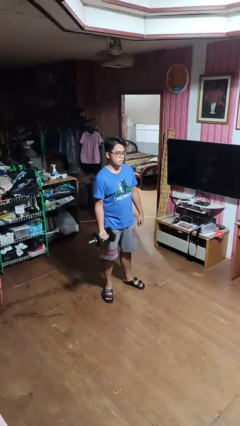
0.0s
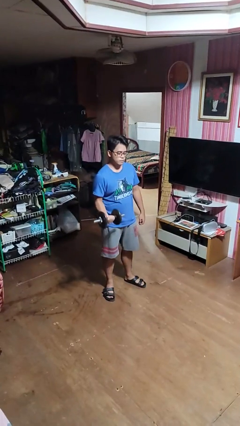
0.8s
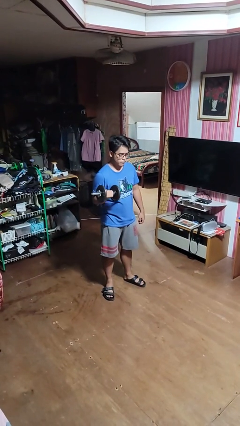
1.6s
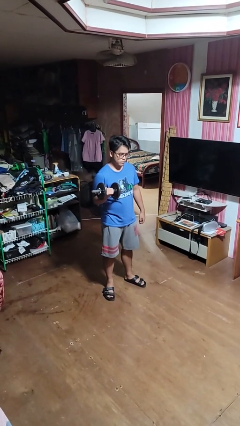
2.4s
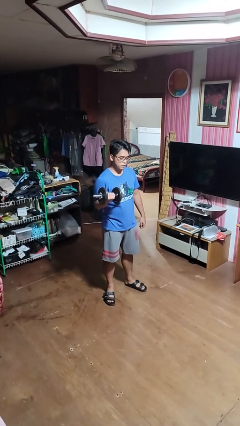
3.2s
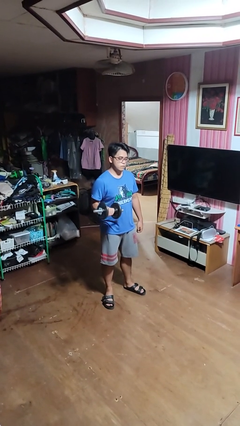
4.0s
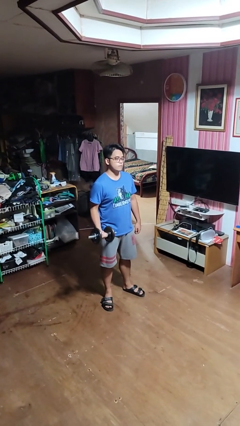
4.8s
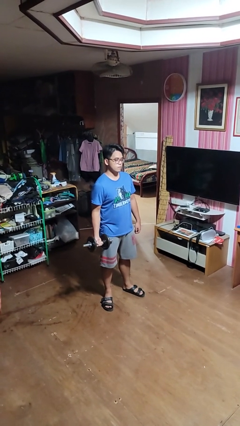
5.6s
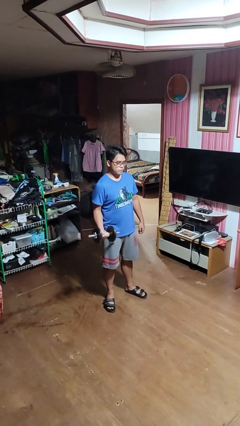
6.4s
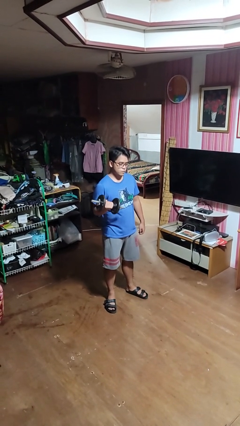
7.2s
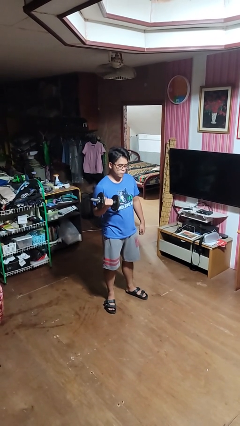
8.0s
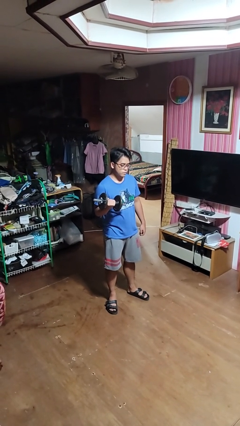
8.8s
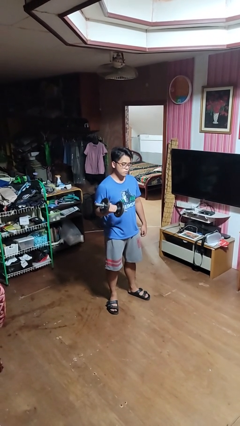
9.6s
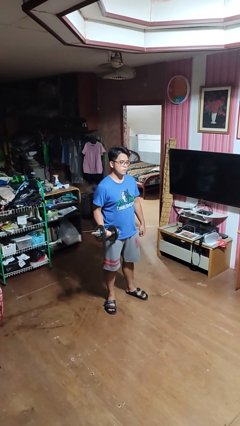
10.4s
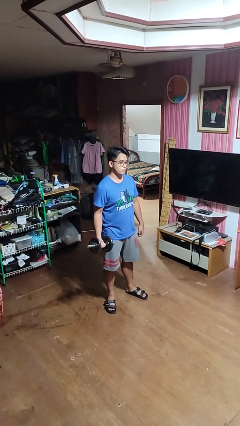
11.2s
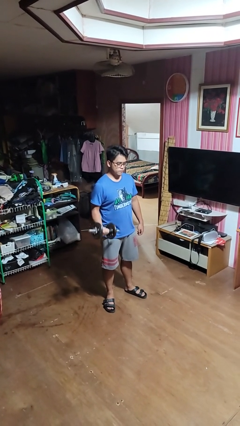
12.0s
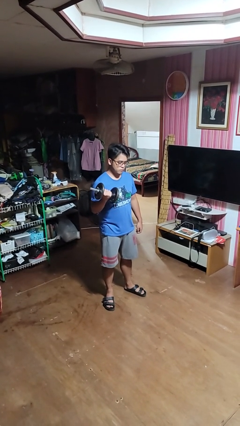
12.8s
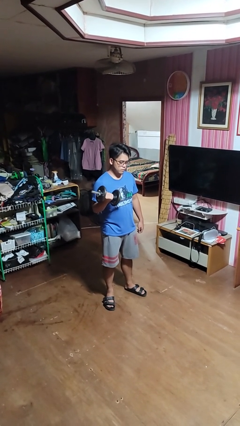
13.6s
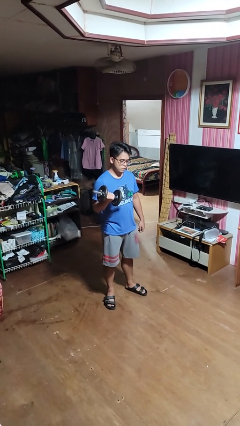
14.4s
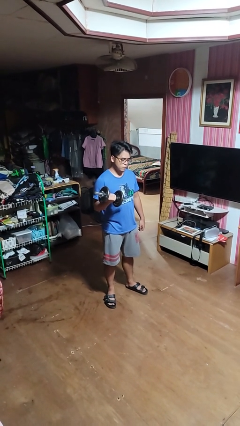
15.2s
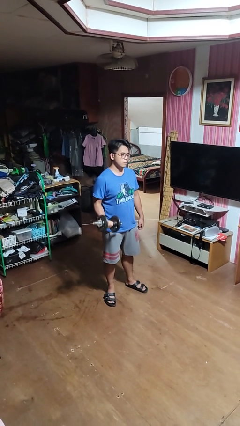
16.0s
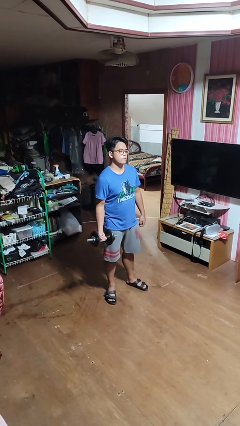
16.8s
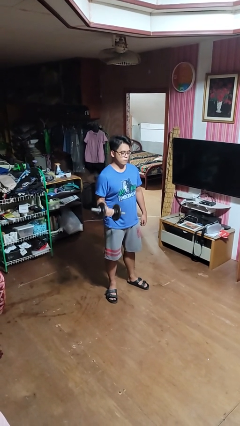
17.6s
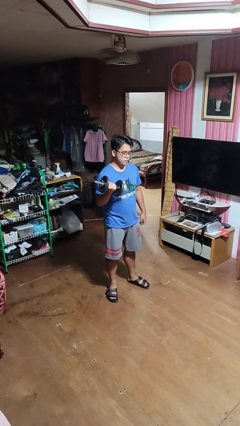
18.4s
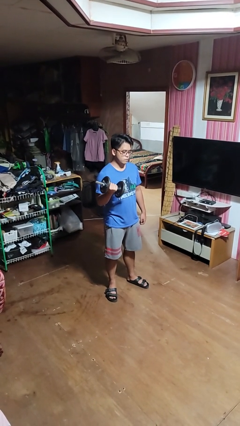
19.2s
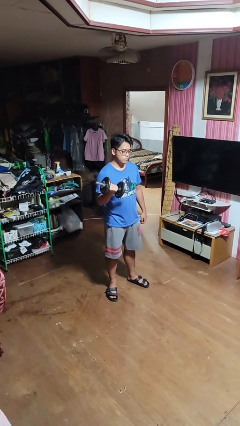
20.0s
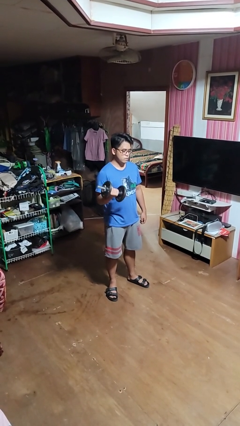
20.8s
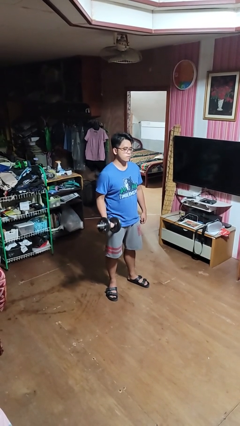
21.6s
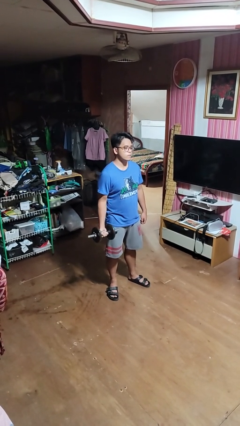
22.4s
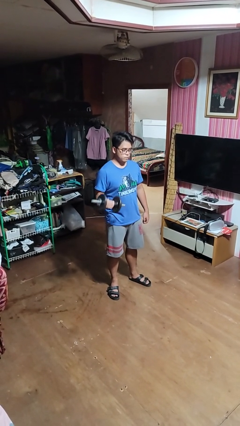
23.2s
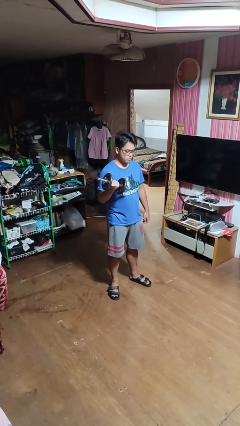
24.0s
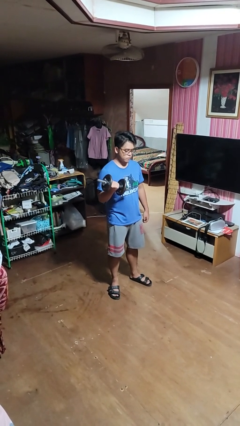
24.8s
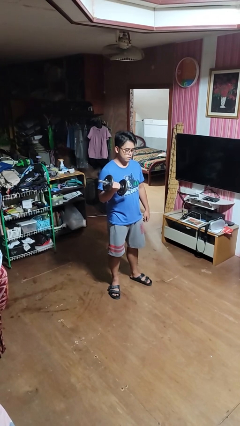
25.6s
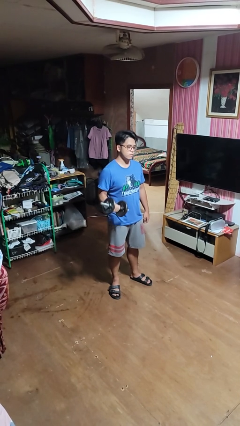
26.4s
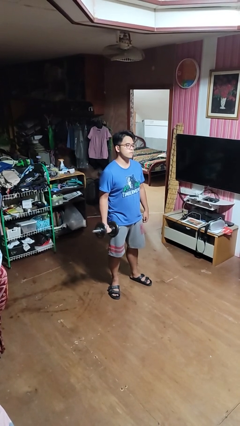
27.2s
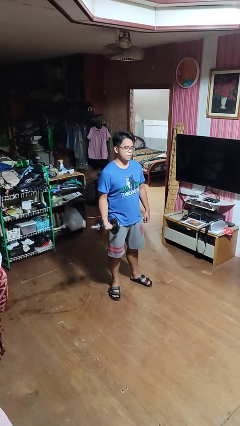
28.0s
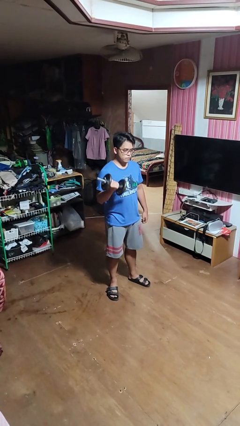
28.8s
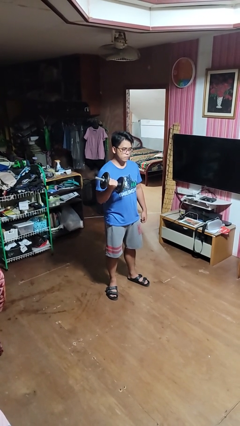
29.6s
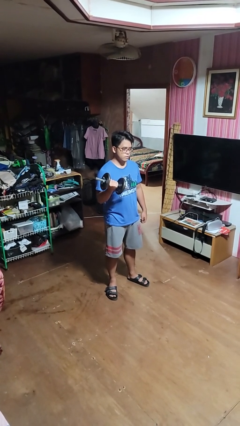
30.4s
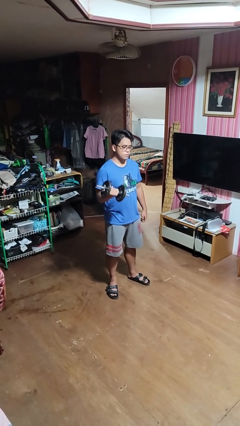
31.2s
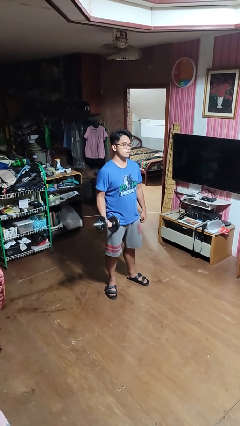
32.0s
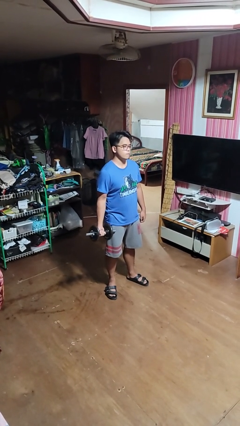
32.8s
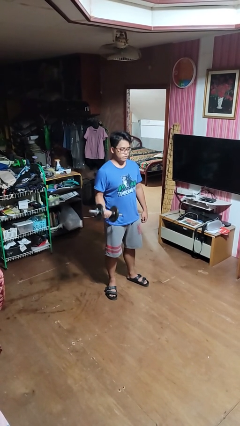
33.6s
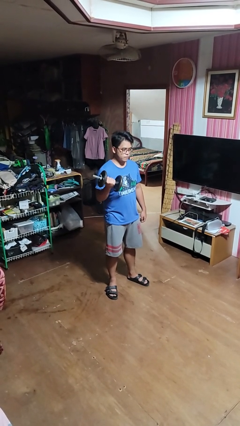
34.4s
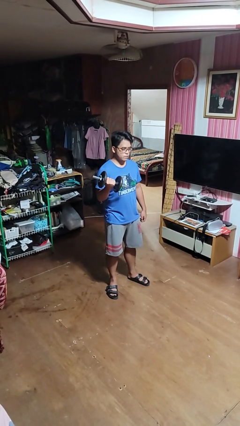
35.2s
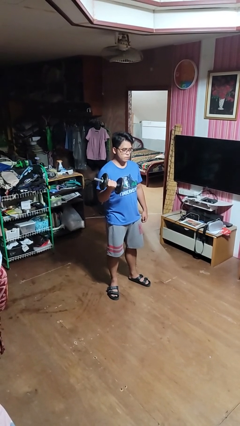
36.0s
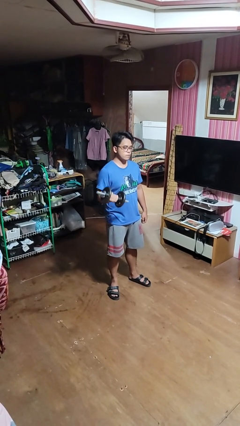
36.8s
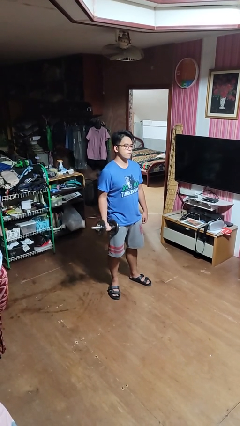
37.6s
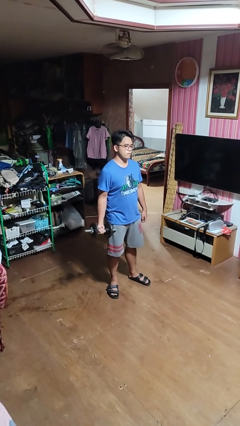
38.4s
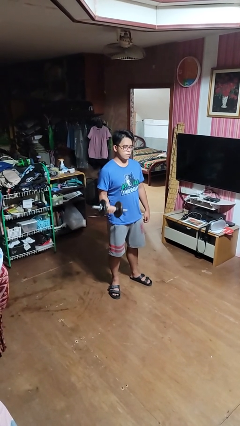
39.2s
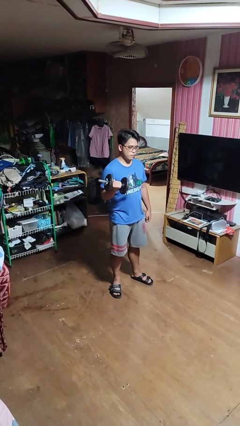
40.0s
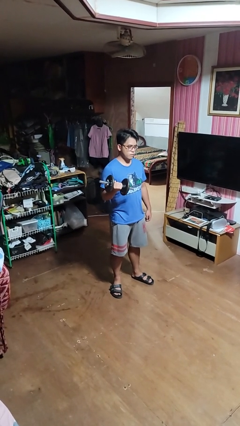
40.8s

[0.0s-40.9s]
person lifts dumbbells

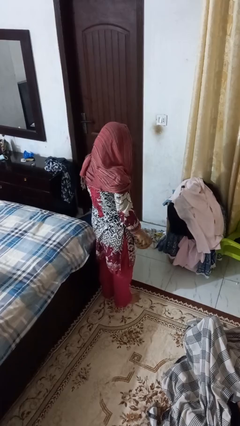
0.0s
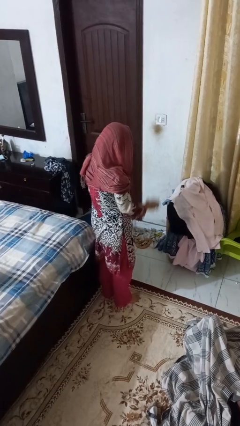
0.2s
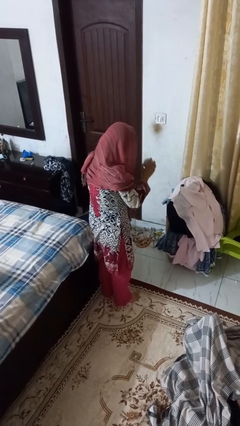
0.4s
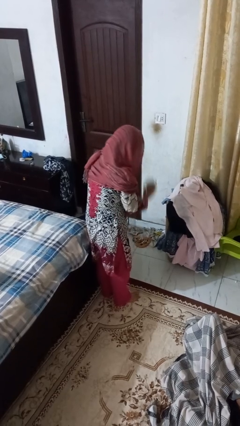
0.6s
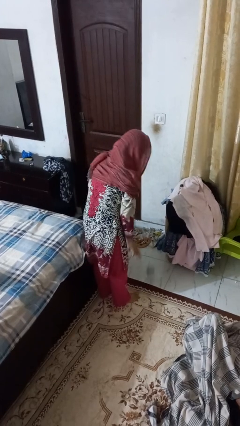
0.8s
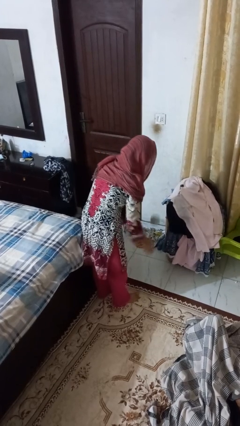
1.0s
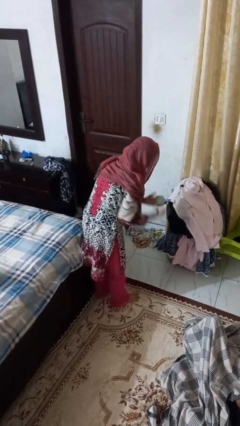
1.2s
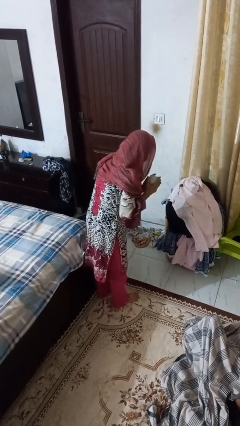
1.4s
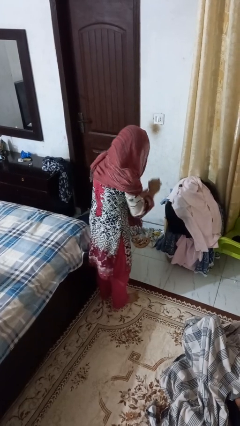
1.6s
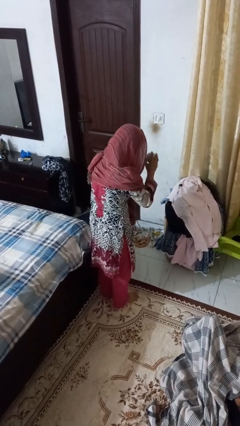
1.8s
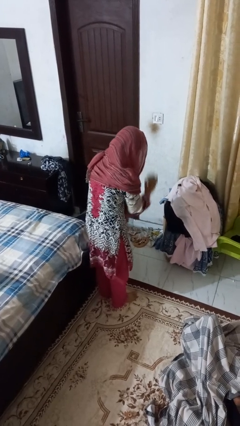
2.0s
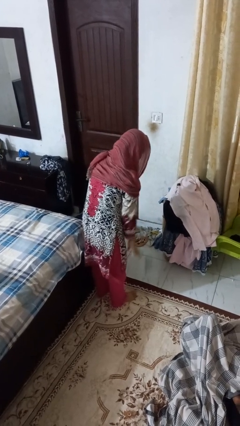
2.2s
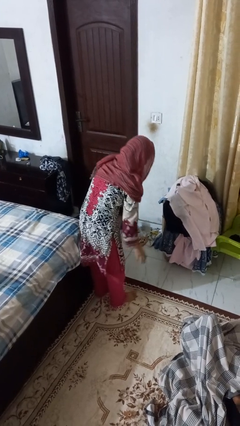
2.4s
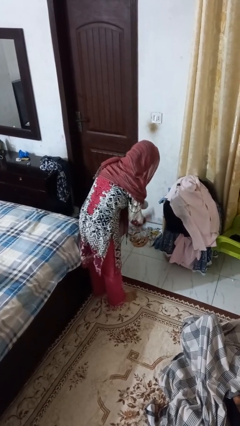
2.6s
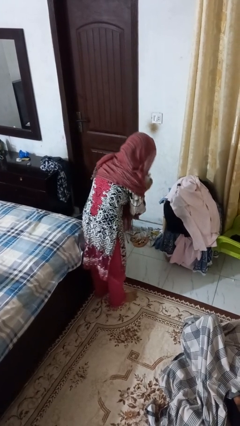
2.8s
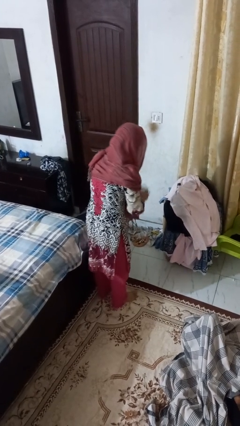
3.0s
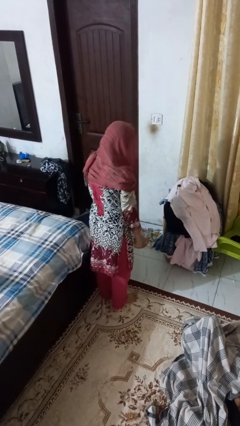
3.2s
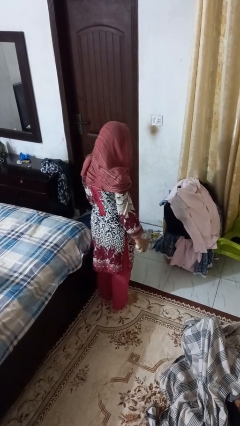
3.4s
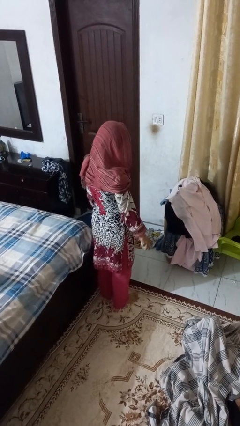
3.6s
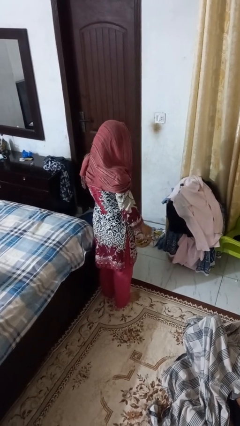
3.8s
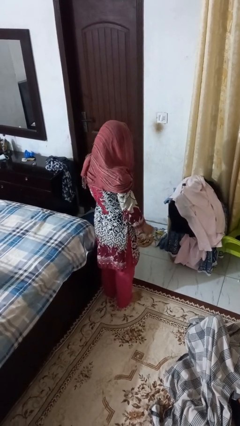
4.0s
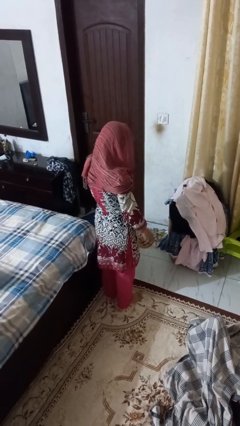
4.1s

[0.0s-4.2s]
person bounces ball on floor

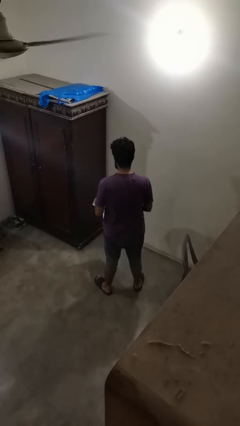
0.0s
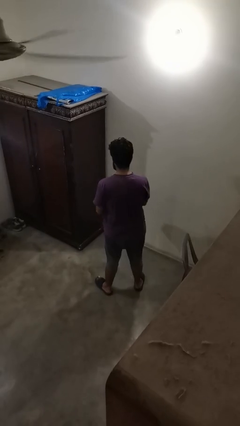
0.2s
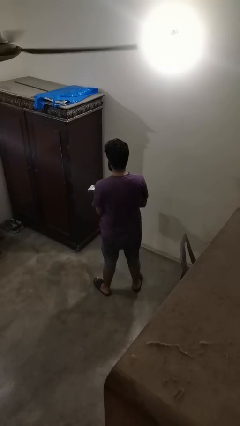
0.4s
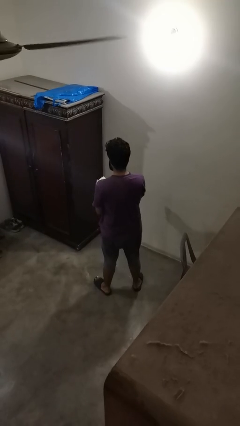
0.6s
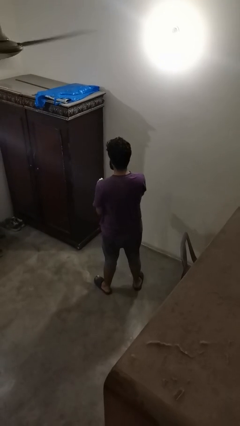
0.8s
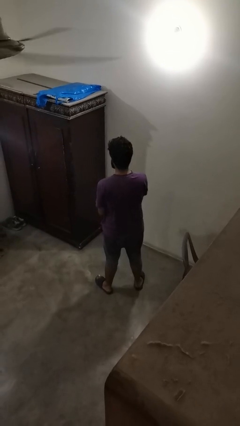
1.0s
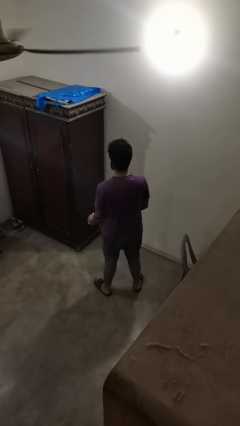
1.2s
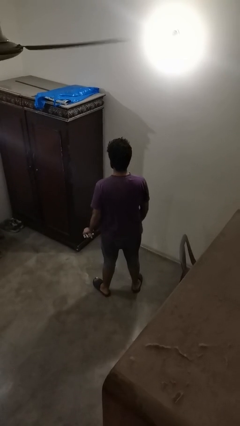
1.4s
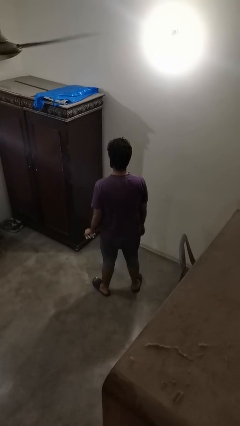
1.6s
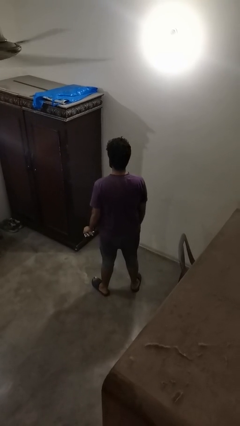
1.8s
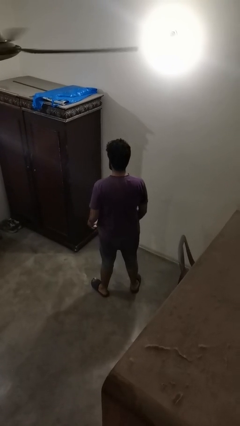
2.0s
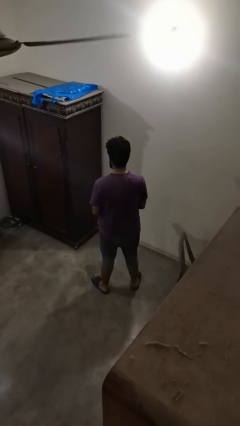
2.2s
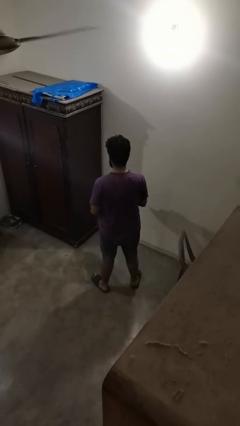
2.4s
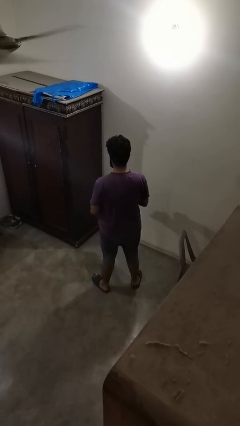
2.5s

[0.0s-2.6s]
person crumples paper

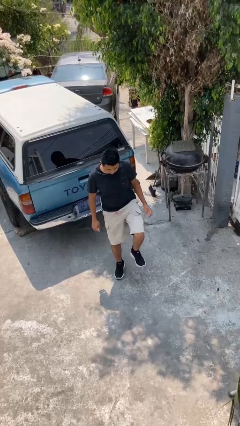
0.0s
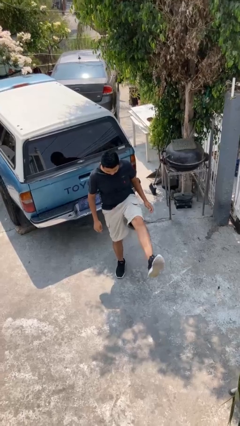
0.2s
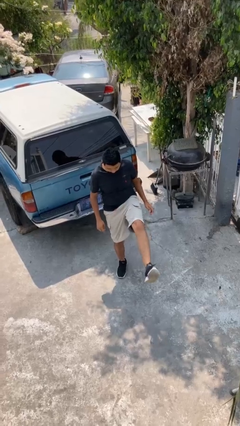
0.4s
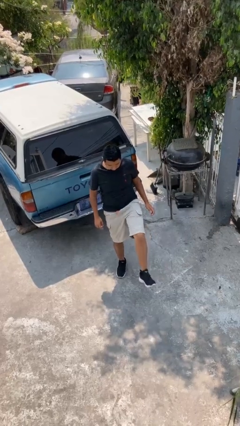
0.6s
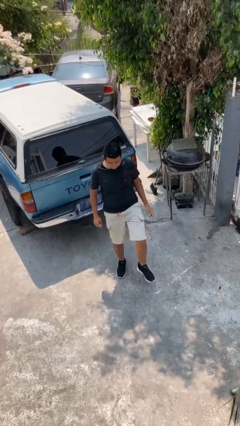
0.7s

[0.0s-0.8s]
person karate kicks

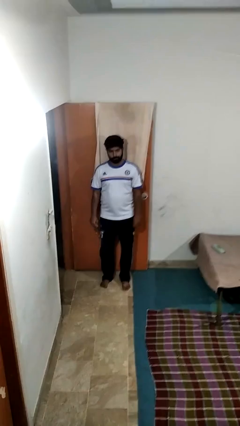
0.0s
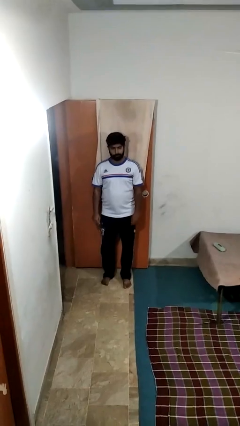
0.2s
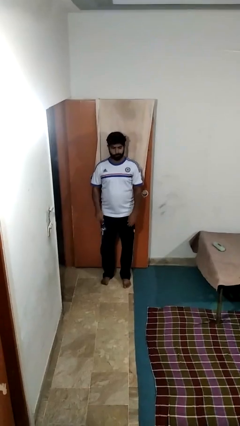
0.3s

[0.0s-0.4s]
person puts on glasses
